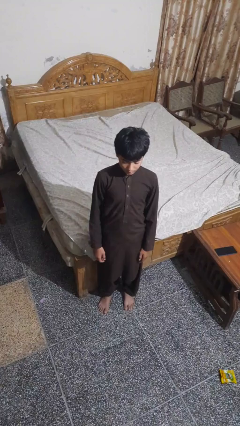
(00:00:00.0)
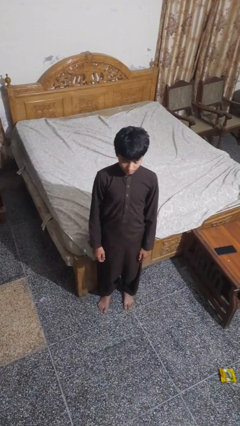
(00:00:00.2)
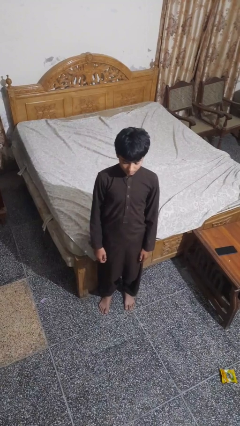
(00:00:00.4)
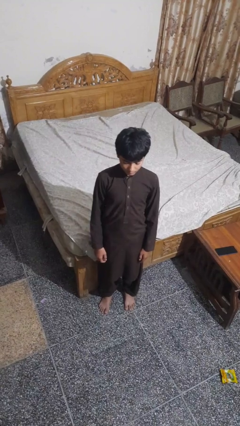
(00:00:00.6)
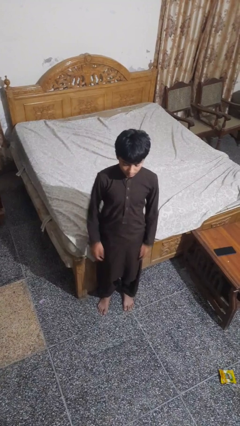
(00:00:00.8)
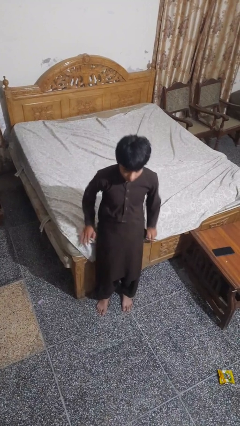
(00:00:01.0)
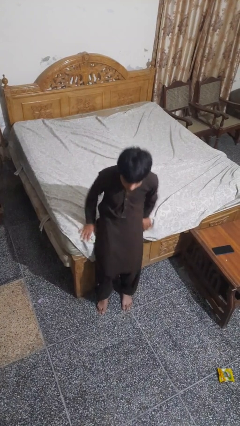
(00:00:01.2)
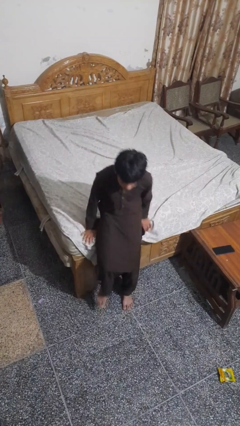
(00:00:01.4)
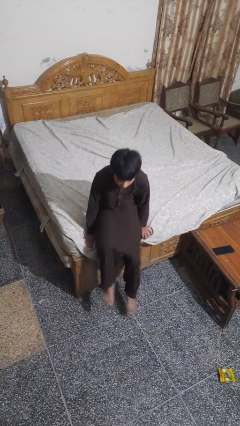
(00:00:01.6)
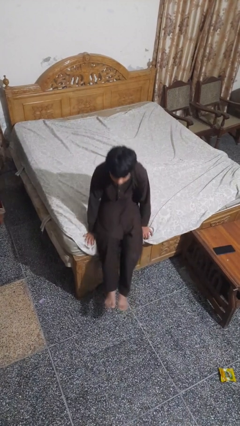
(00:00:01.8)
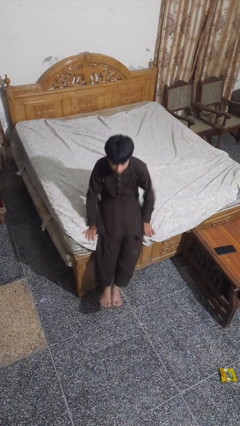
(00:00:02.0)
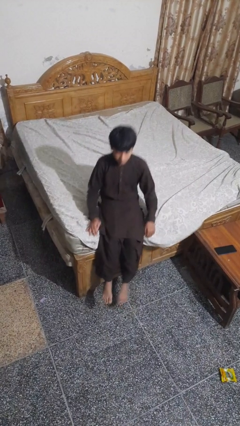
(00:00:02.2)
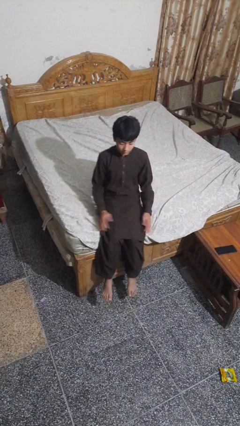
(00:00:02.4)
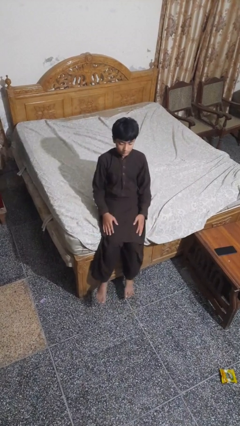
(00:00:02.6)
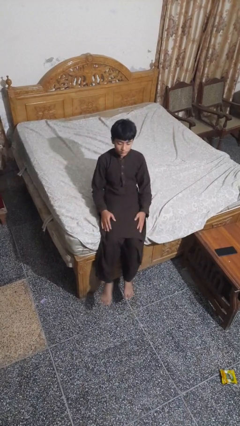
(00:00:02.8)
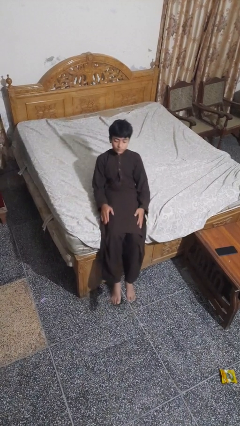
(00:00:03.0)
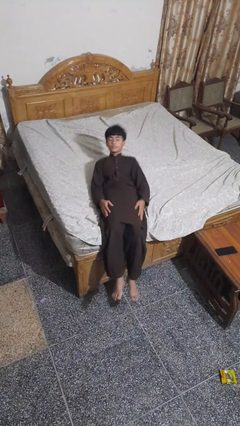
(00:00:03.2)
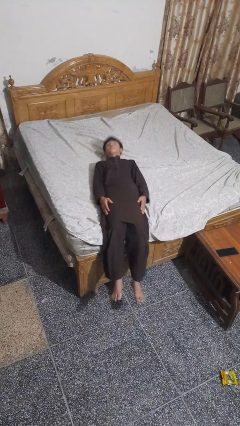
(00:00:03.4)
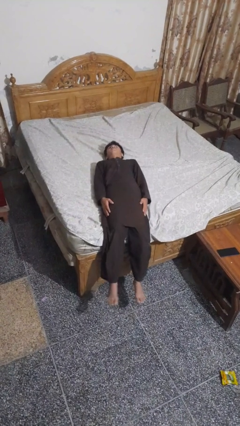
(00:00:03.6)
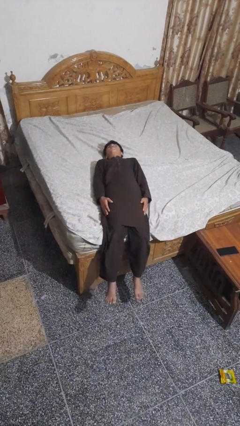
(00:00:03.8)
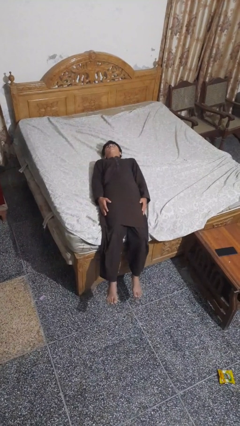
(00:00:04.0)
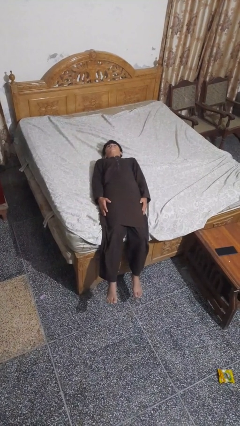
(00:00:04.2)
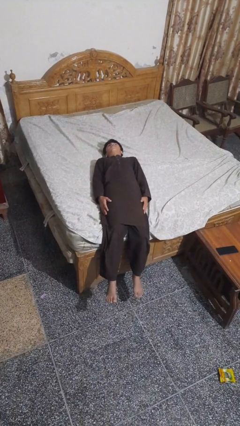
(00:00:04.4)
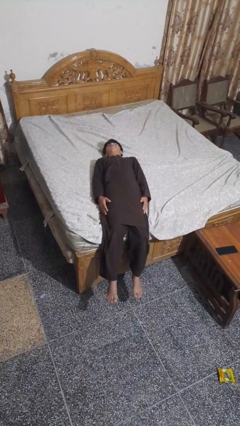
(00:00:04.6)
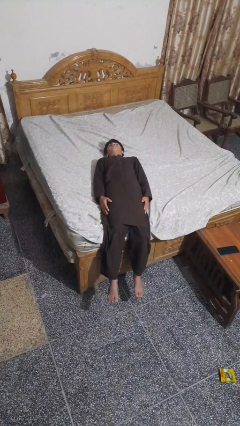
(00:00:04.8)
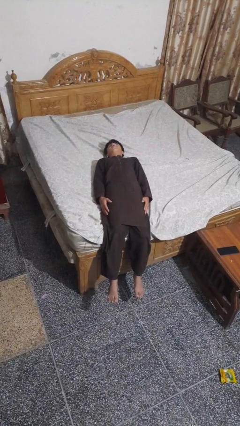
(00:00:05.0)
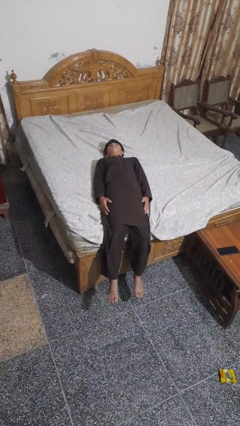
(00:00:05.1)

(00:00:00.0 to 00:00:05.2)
person lies down on bed

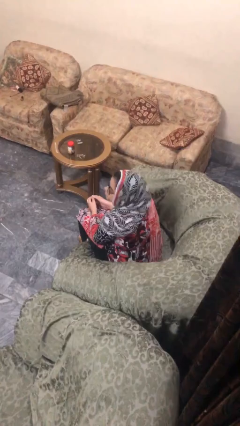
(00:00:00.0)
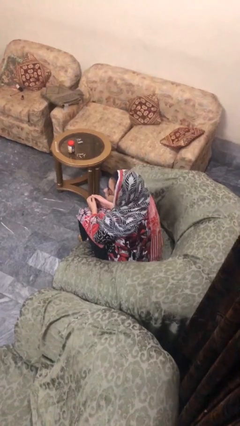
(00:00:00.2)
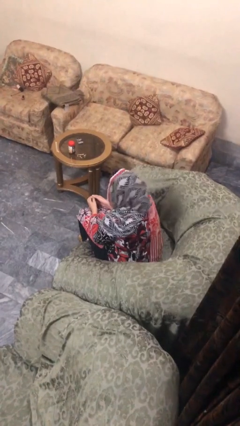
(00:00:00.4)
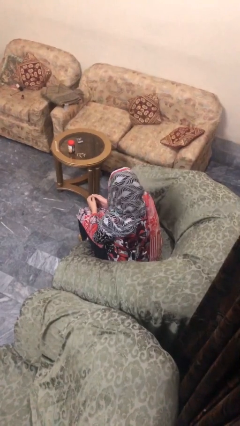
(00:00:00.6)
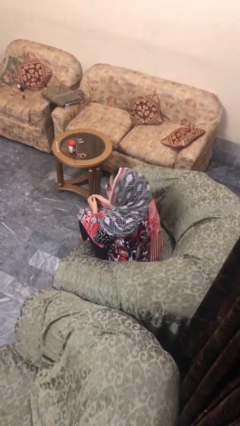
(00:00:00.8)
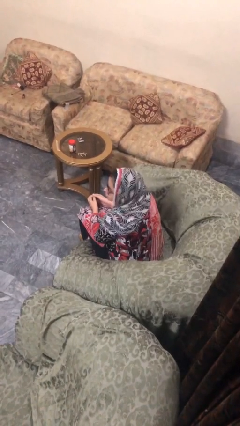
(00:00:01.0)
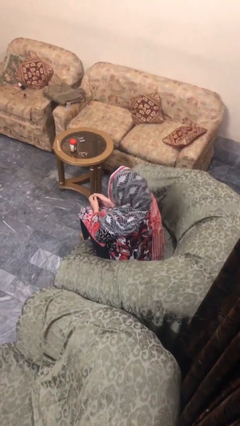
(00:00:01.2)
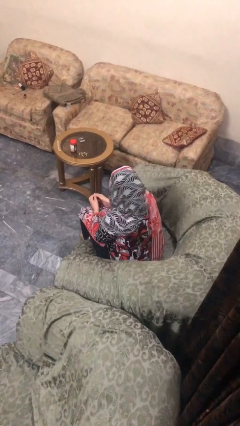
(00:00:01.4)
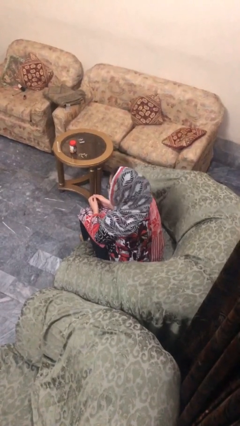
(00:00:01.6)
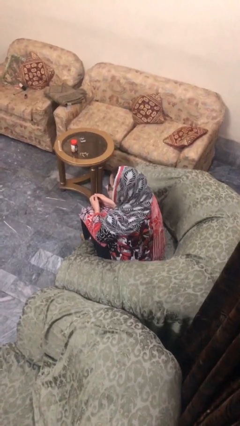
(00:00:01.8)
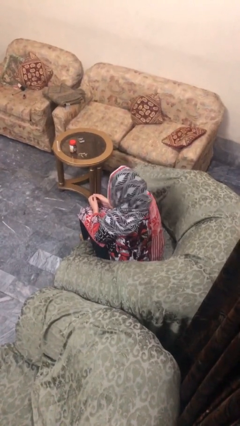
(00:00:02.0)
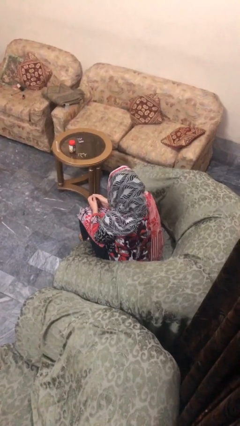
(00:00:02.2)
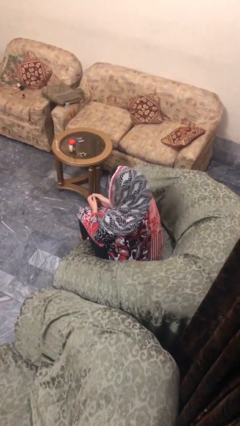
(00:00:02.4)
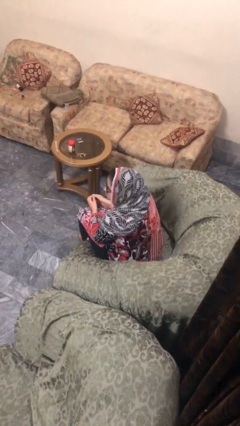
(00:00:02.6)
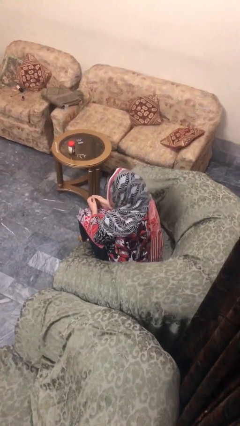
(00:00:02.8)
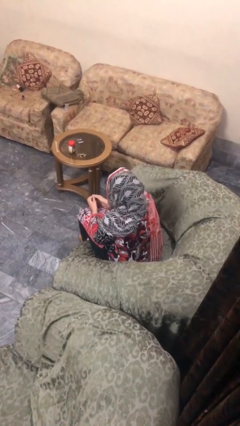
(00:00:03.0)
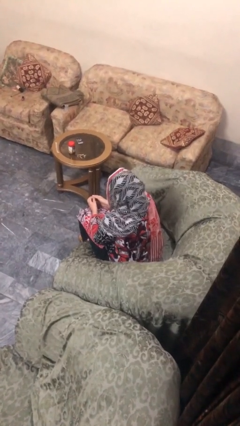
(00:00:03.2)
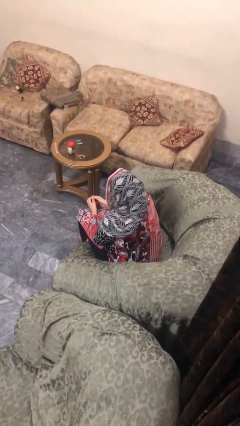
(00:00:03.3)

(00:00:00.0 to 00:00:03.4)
person shakes head

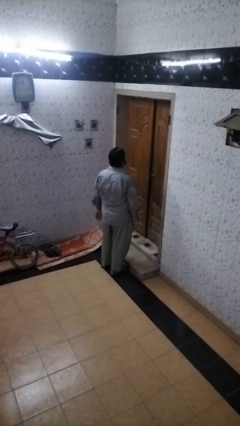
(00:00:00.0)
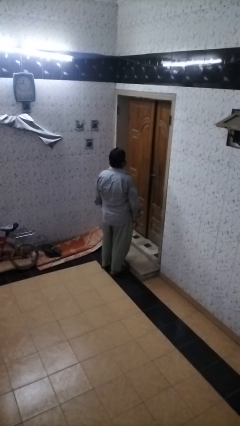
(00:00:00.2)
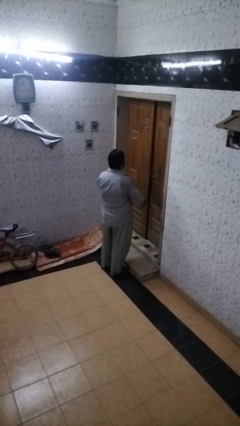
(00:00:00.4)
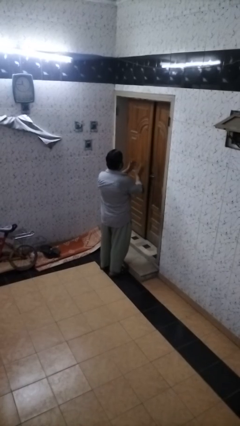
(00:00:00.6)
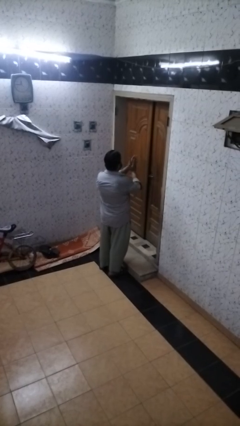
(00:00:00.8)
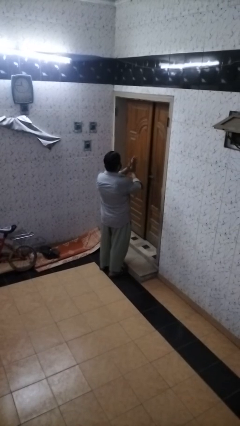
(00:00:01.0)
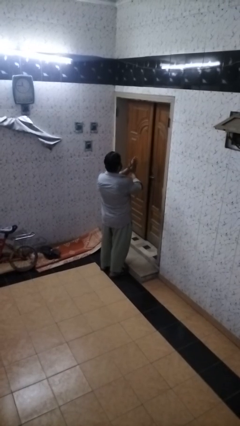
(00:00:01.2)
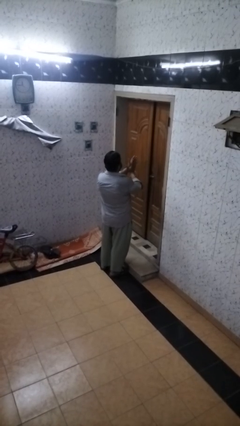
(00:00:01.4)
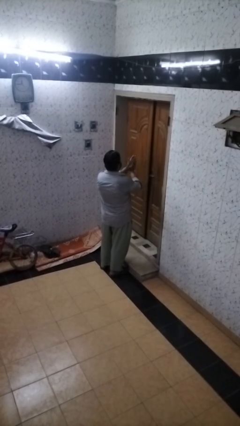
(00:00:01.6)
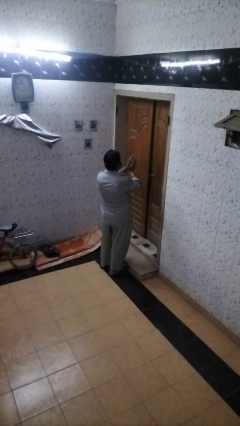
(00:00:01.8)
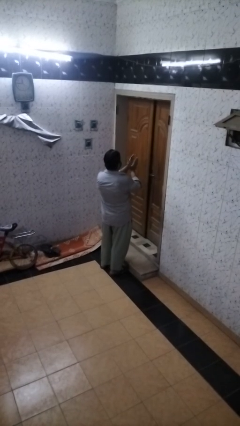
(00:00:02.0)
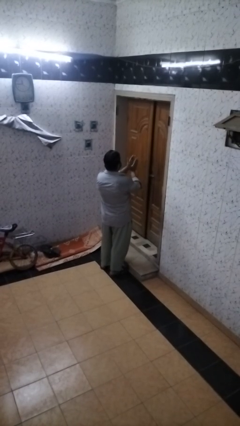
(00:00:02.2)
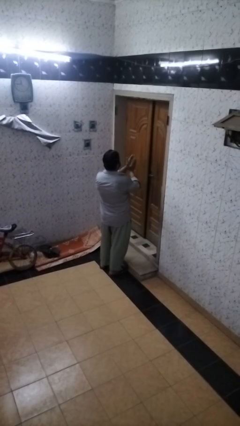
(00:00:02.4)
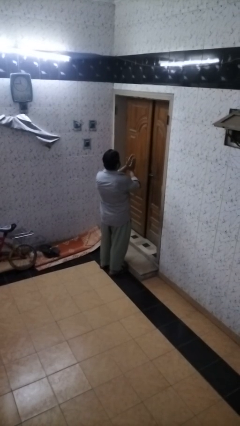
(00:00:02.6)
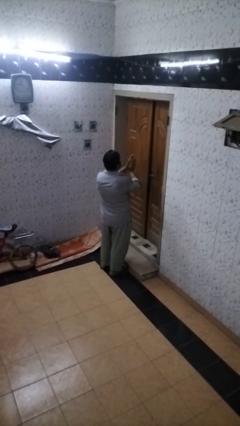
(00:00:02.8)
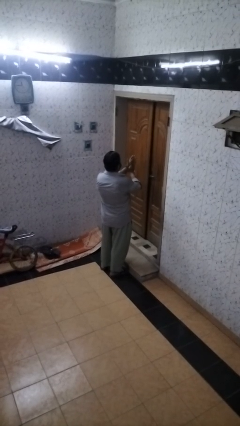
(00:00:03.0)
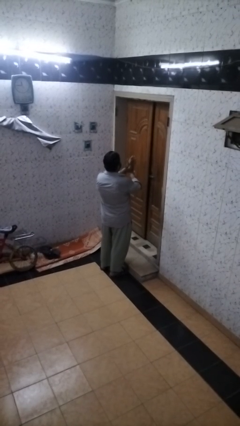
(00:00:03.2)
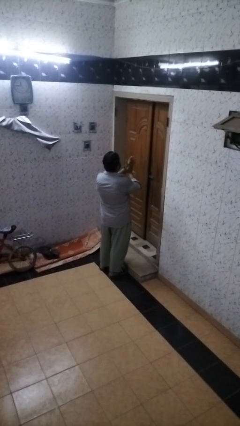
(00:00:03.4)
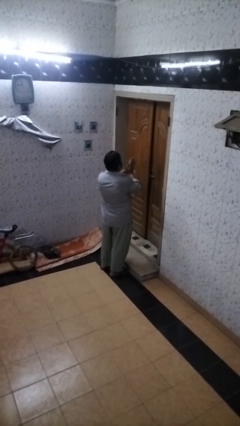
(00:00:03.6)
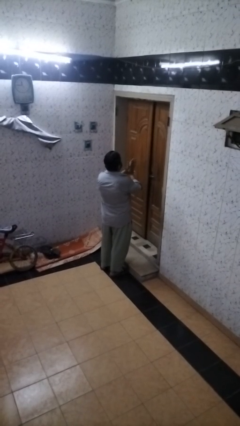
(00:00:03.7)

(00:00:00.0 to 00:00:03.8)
person claps hands

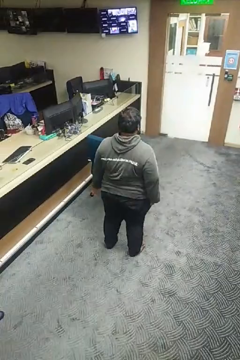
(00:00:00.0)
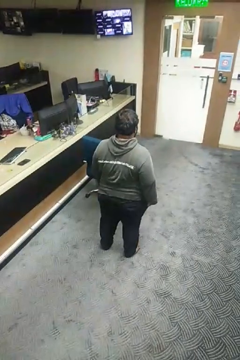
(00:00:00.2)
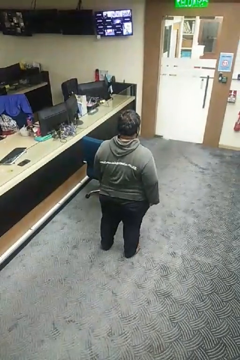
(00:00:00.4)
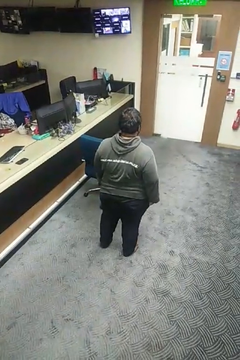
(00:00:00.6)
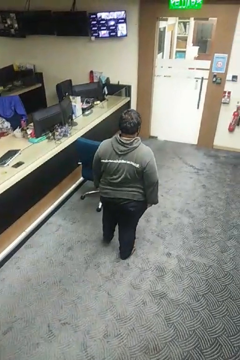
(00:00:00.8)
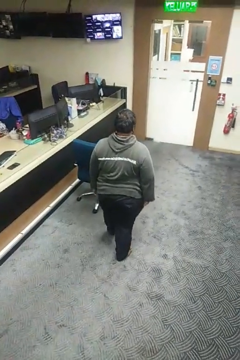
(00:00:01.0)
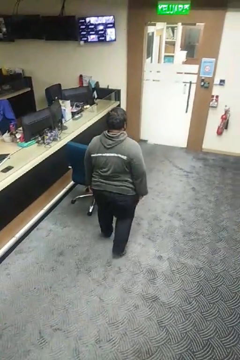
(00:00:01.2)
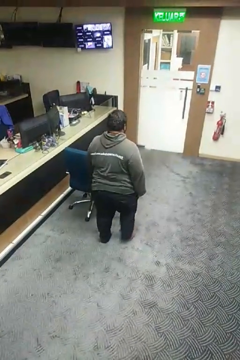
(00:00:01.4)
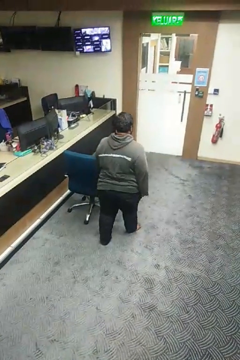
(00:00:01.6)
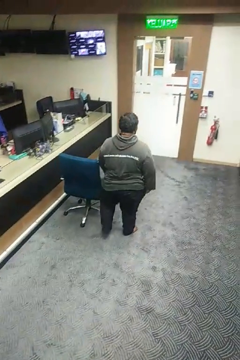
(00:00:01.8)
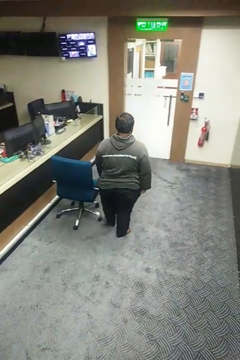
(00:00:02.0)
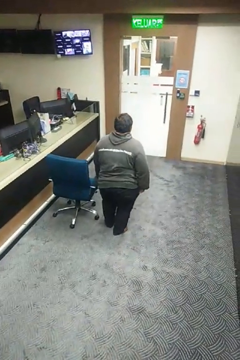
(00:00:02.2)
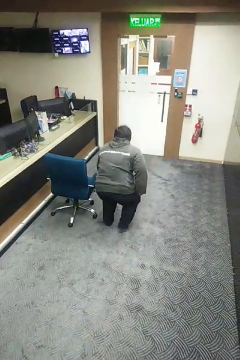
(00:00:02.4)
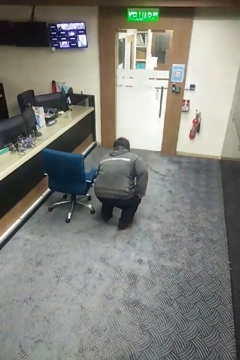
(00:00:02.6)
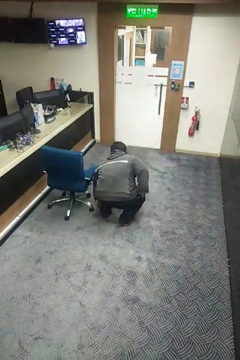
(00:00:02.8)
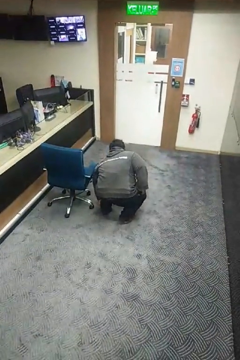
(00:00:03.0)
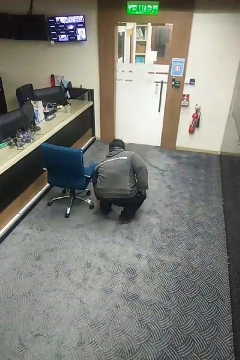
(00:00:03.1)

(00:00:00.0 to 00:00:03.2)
person stubs toe

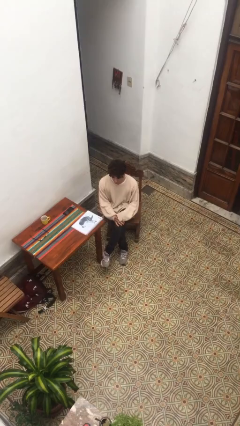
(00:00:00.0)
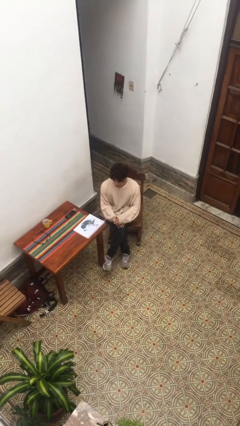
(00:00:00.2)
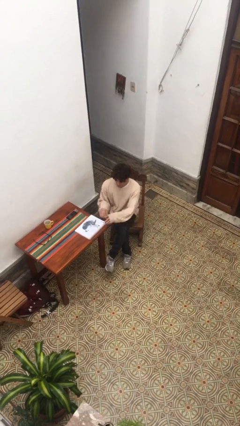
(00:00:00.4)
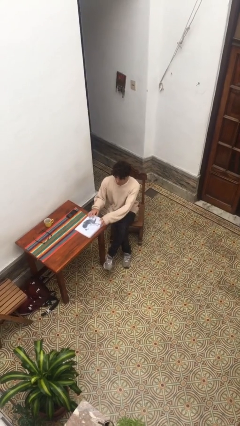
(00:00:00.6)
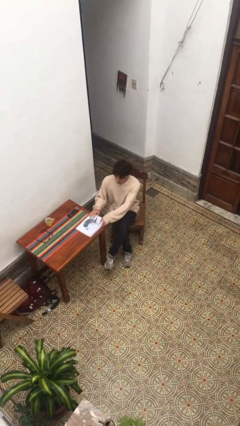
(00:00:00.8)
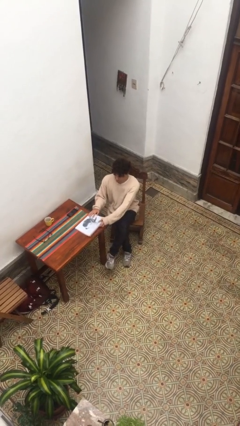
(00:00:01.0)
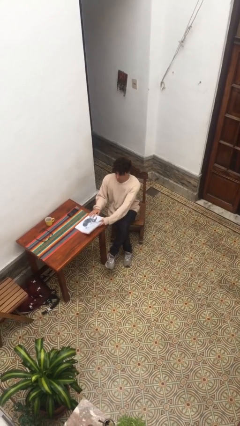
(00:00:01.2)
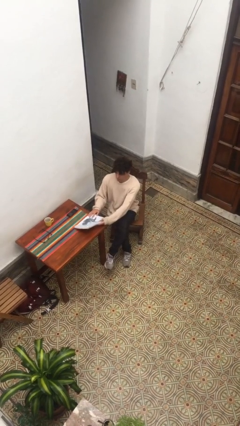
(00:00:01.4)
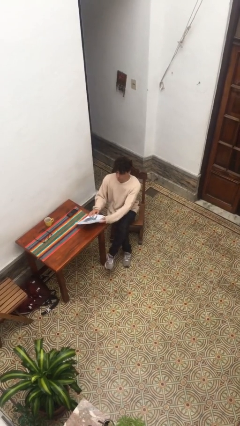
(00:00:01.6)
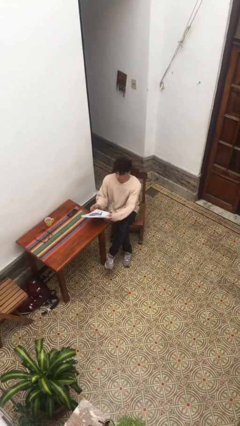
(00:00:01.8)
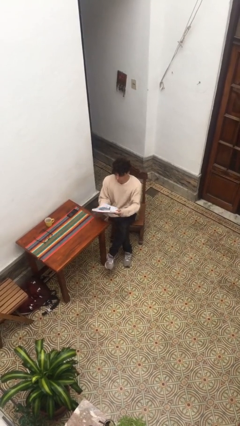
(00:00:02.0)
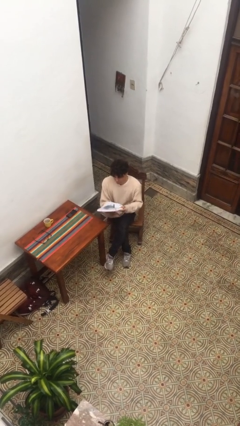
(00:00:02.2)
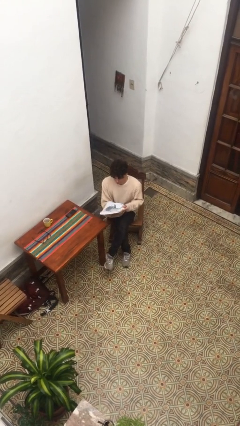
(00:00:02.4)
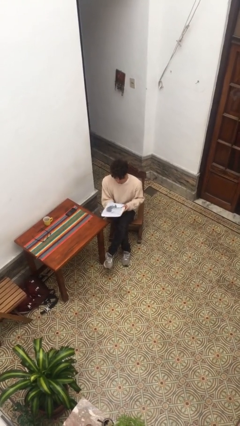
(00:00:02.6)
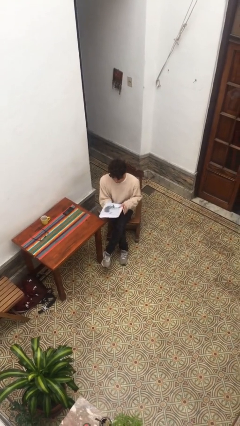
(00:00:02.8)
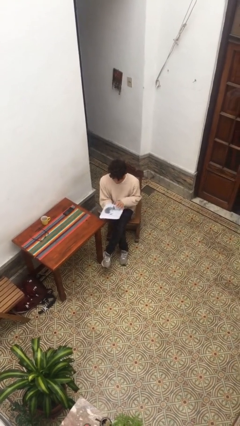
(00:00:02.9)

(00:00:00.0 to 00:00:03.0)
person picks up object from table
